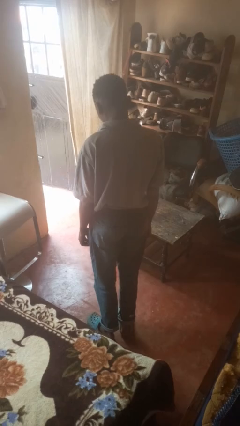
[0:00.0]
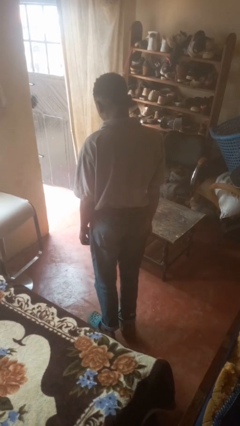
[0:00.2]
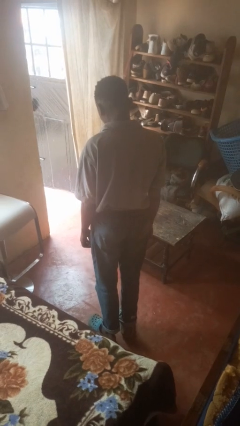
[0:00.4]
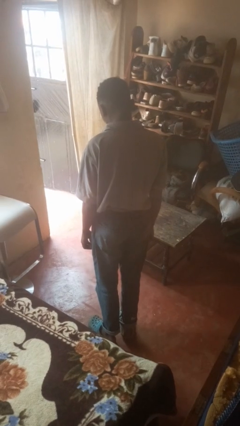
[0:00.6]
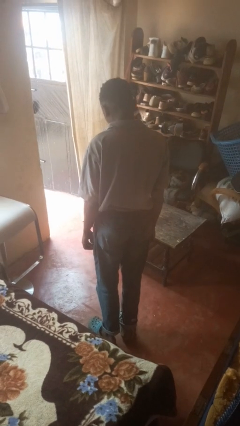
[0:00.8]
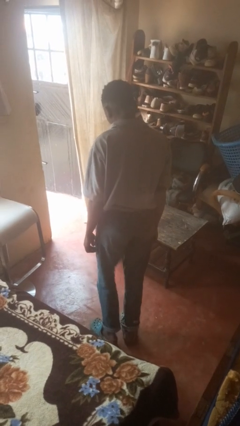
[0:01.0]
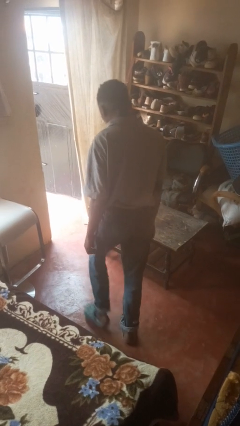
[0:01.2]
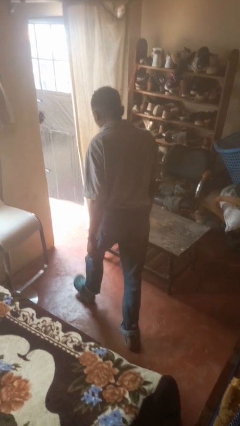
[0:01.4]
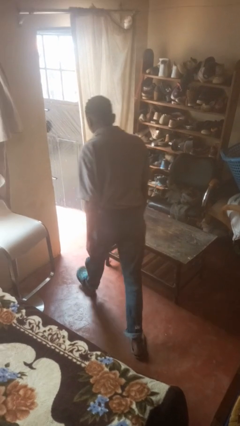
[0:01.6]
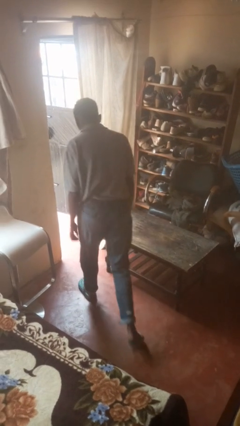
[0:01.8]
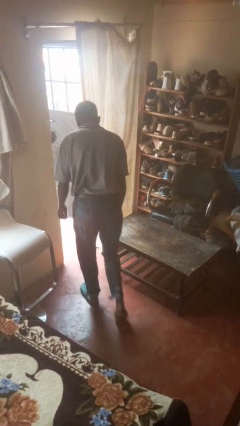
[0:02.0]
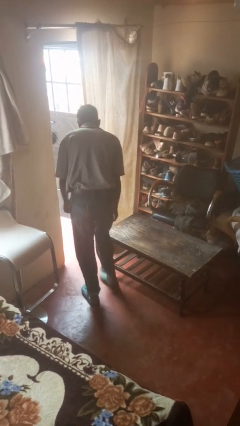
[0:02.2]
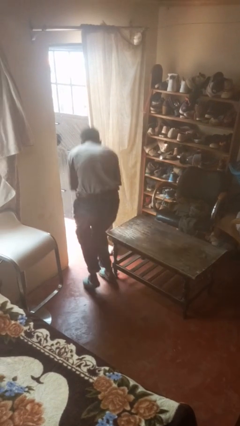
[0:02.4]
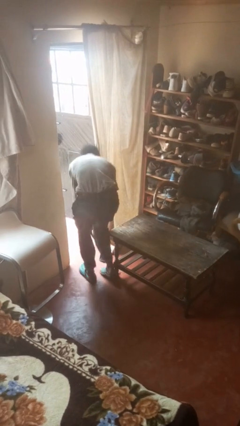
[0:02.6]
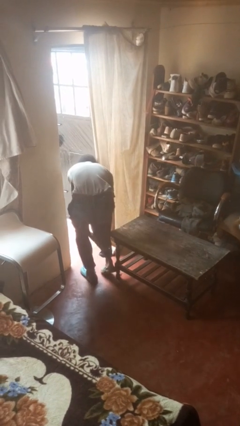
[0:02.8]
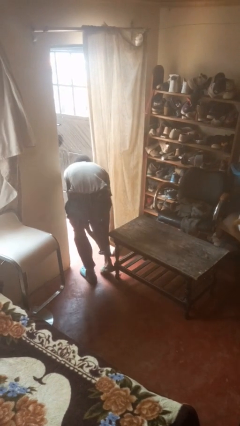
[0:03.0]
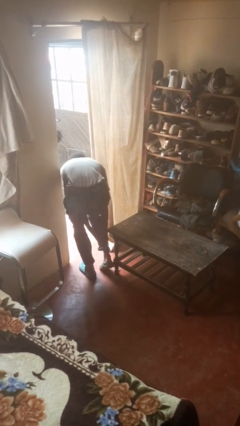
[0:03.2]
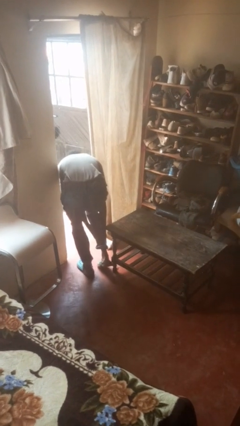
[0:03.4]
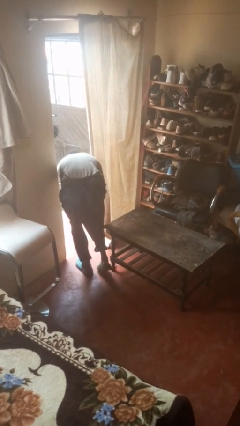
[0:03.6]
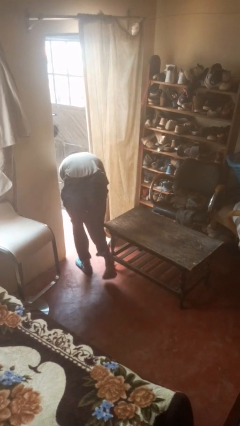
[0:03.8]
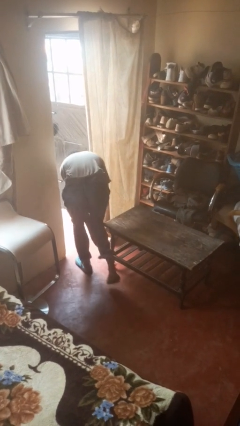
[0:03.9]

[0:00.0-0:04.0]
person bumps into table

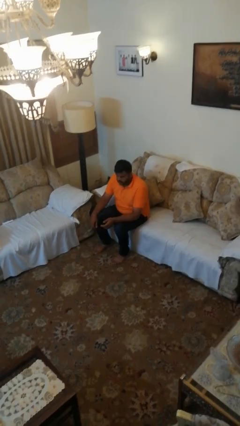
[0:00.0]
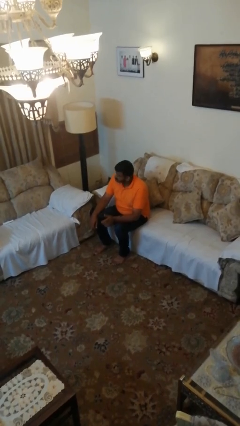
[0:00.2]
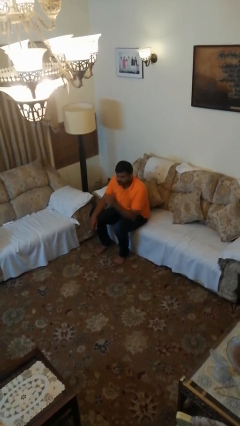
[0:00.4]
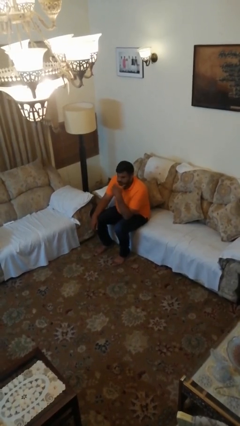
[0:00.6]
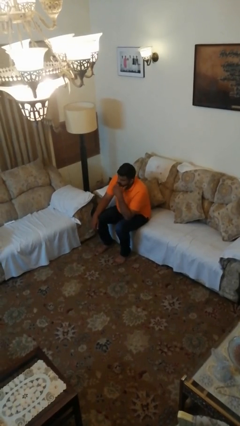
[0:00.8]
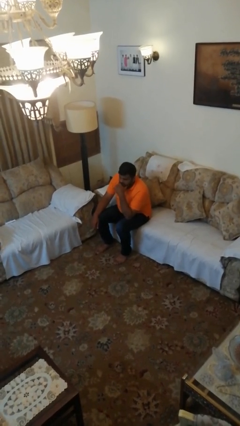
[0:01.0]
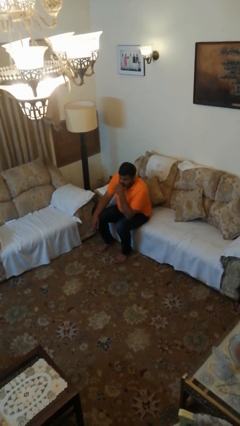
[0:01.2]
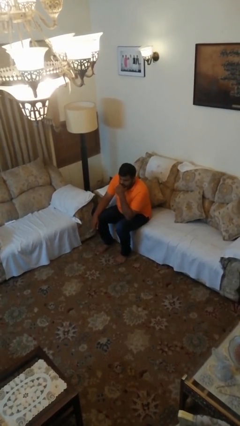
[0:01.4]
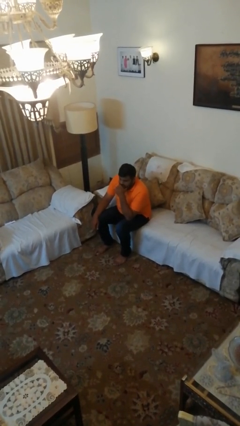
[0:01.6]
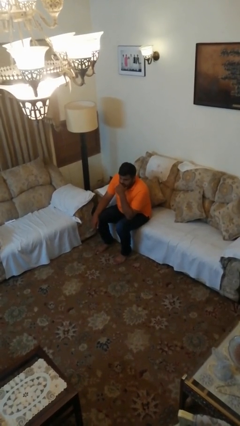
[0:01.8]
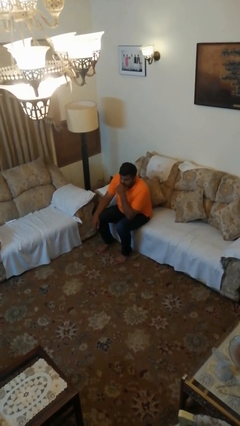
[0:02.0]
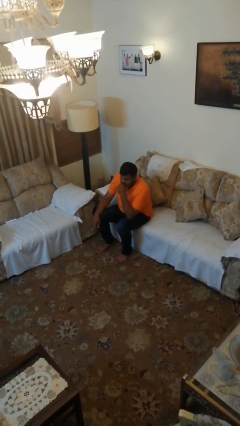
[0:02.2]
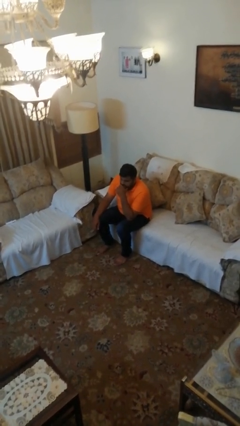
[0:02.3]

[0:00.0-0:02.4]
person strokes chin

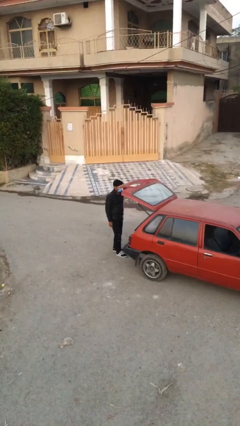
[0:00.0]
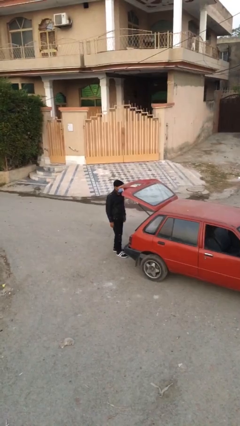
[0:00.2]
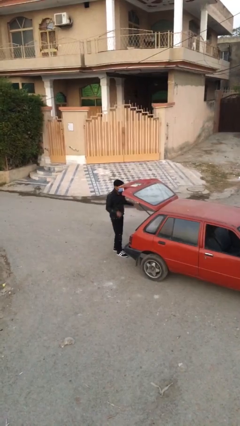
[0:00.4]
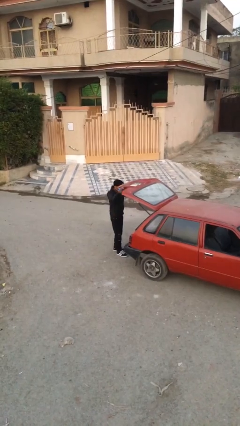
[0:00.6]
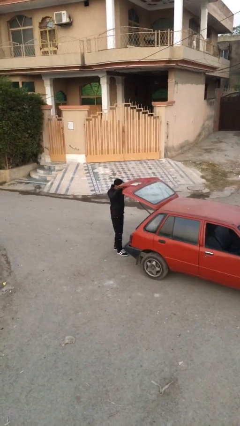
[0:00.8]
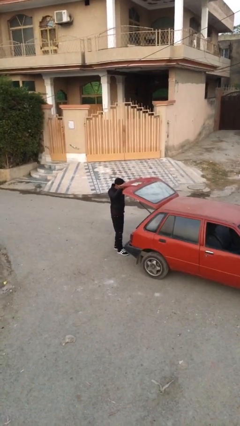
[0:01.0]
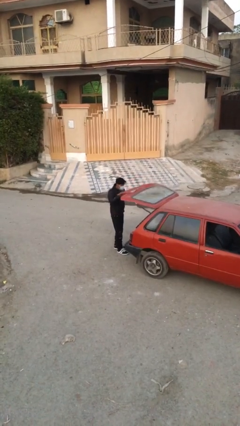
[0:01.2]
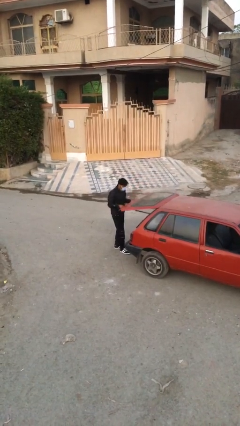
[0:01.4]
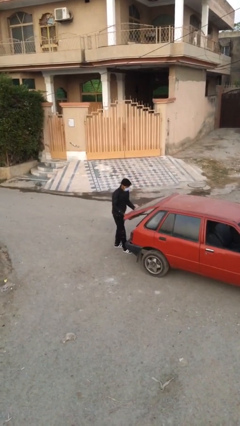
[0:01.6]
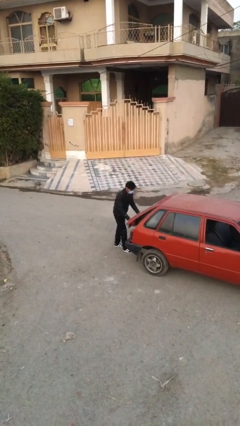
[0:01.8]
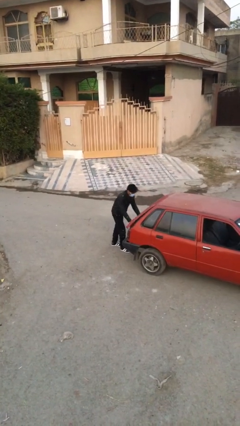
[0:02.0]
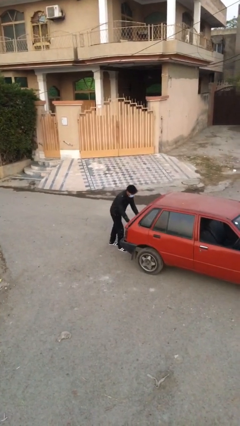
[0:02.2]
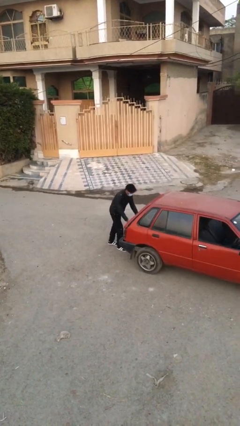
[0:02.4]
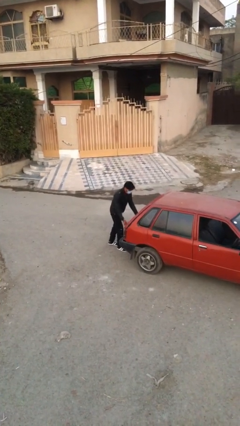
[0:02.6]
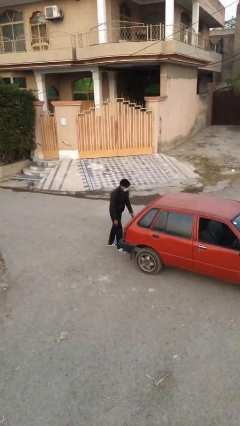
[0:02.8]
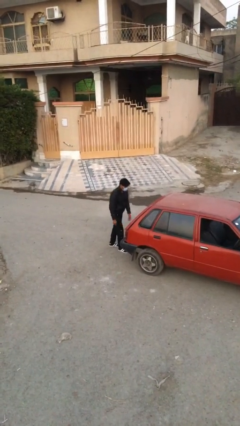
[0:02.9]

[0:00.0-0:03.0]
person closes car trunk

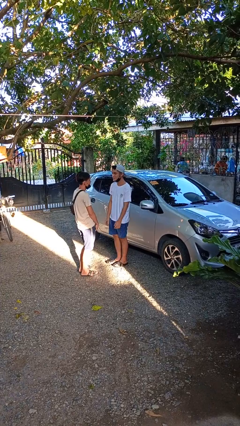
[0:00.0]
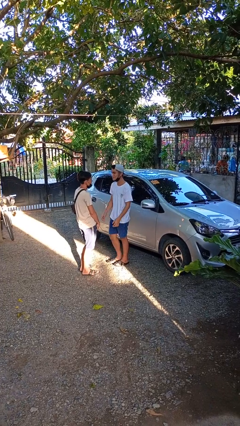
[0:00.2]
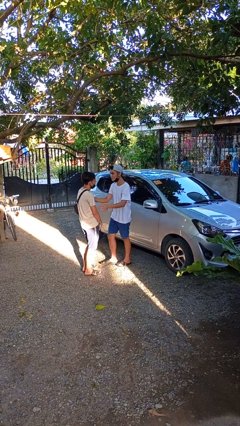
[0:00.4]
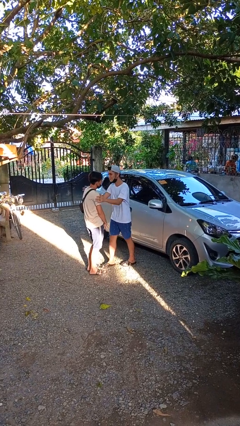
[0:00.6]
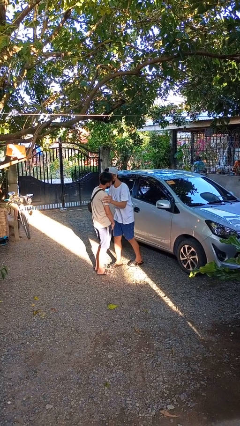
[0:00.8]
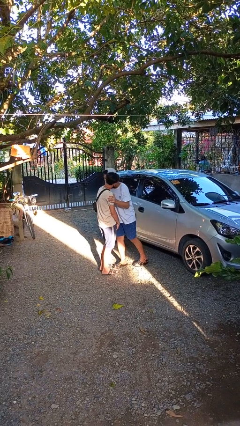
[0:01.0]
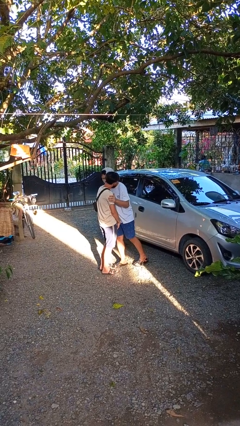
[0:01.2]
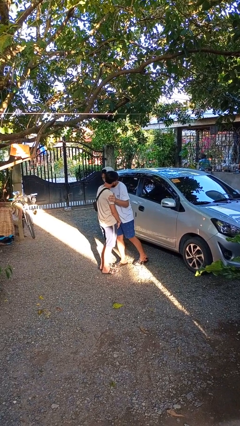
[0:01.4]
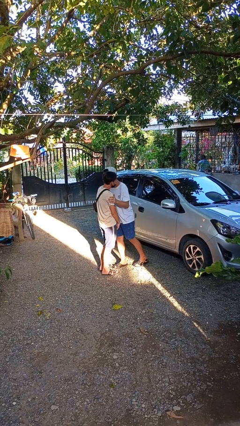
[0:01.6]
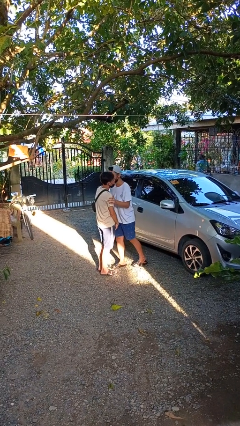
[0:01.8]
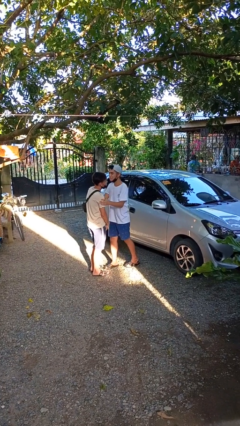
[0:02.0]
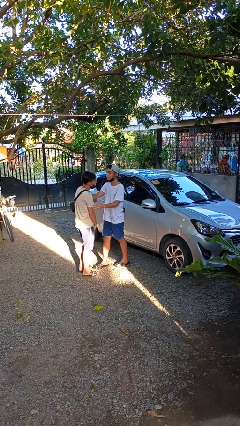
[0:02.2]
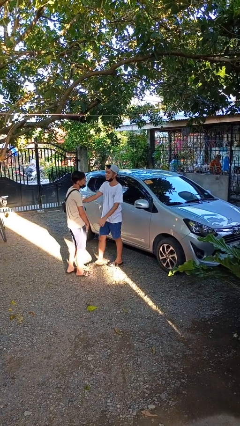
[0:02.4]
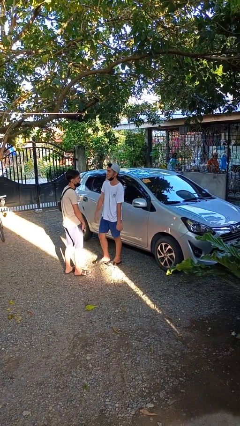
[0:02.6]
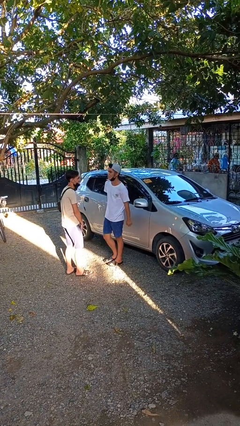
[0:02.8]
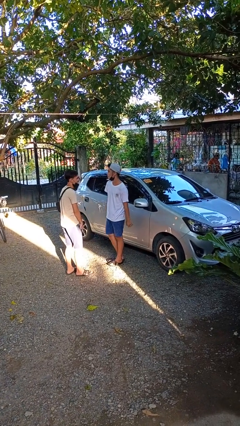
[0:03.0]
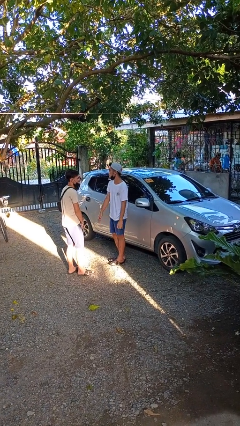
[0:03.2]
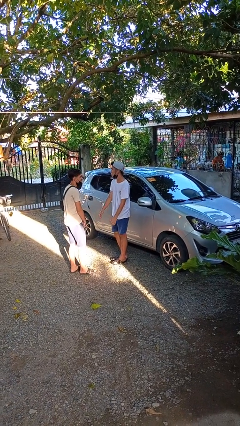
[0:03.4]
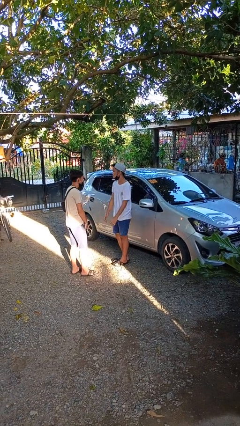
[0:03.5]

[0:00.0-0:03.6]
person kisses cheek of person

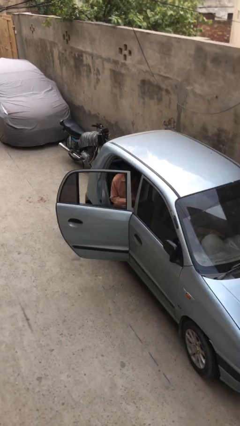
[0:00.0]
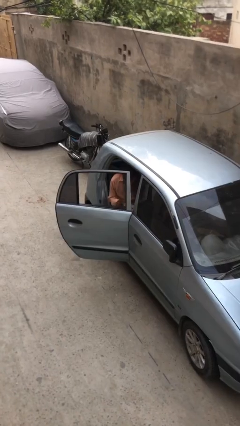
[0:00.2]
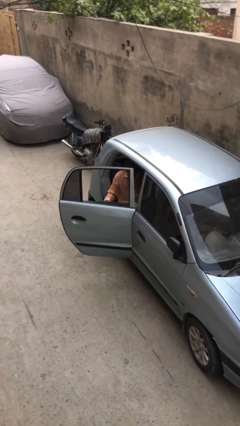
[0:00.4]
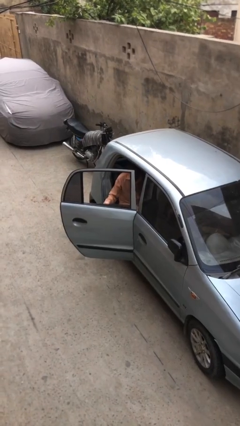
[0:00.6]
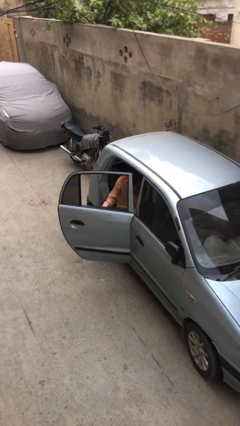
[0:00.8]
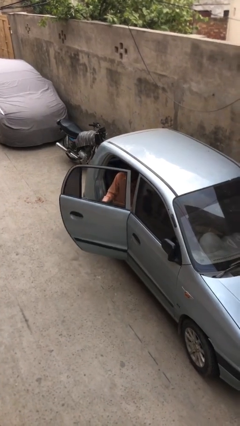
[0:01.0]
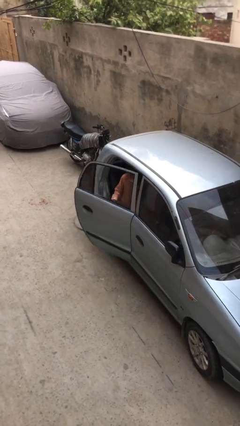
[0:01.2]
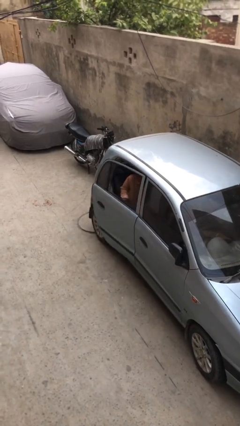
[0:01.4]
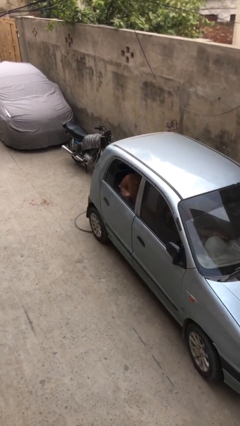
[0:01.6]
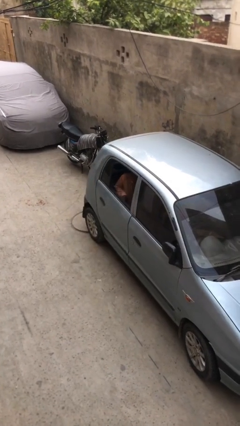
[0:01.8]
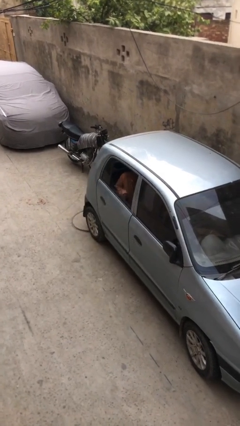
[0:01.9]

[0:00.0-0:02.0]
person closes car door

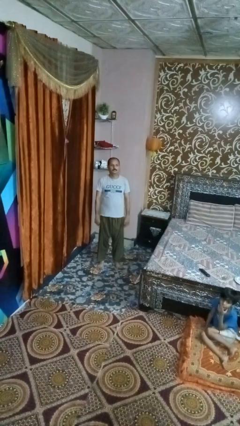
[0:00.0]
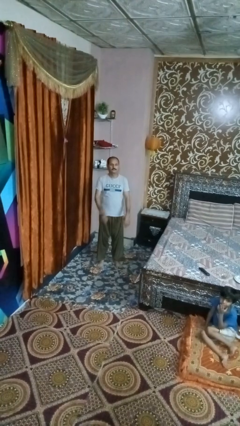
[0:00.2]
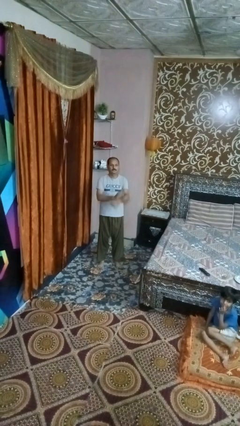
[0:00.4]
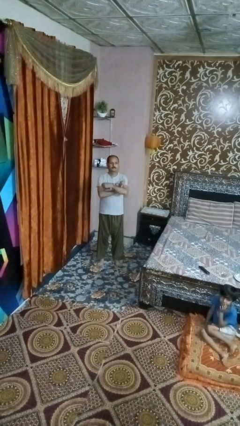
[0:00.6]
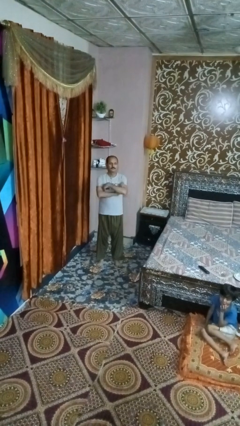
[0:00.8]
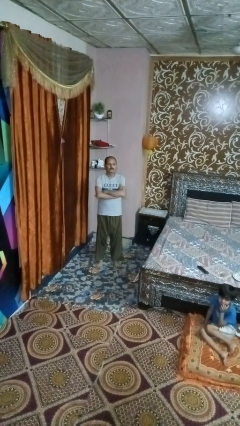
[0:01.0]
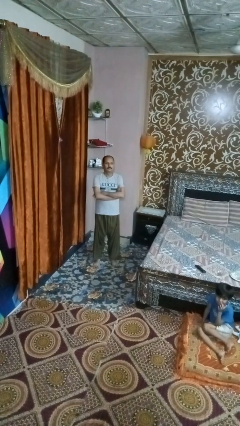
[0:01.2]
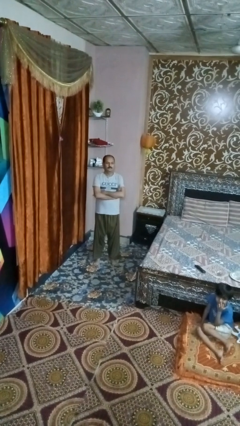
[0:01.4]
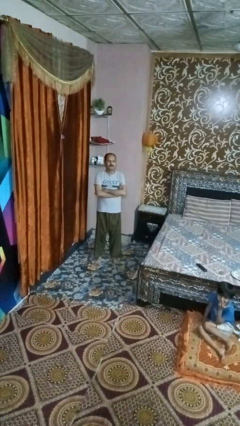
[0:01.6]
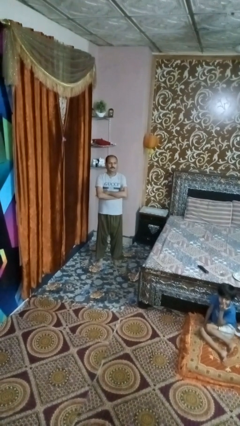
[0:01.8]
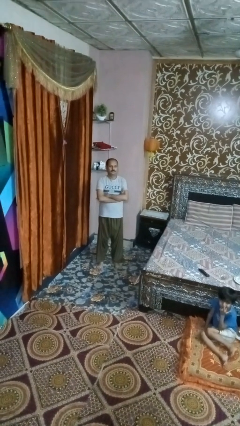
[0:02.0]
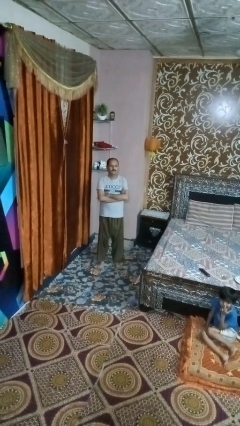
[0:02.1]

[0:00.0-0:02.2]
person crosses arms
